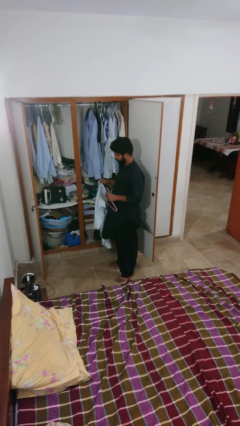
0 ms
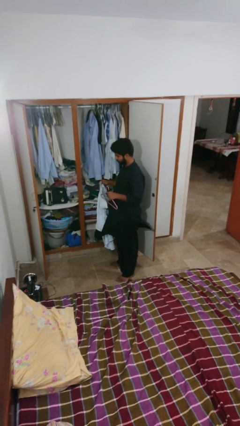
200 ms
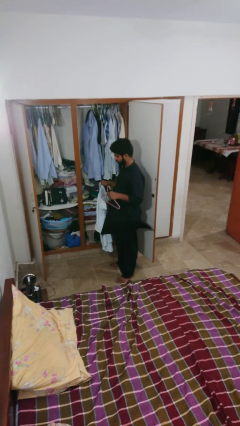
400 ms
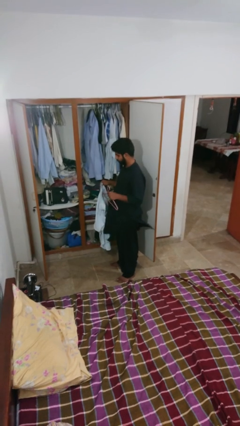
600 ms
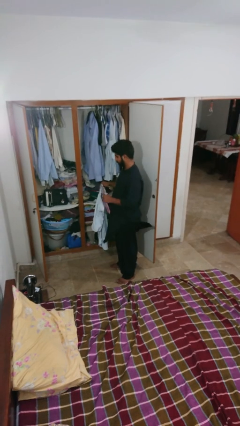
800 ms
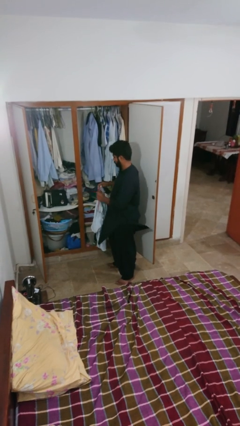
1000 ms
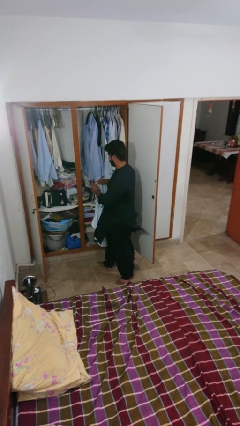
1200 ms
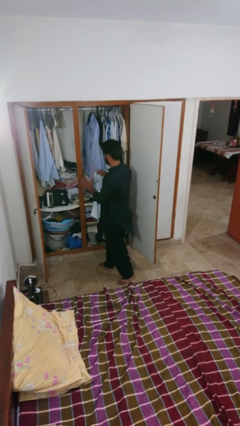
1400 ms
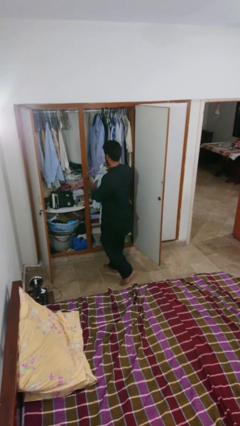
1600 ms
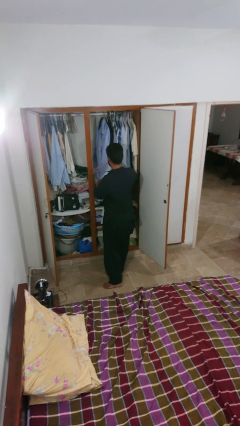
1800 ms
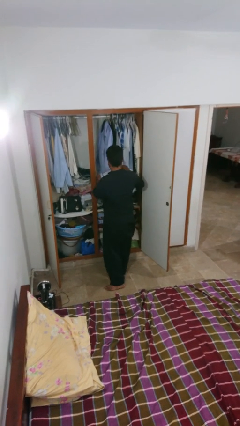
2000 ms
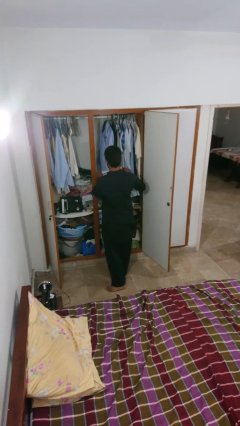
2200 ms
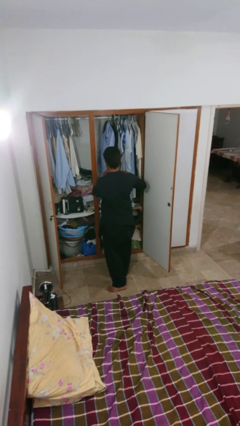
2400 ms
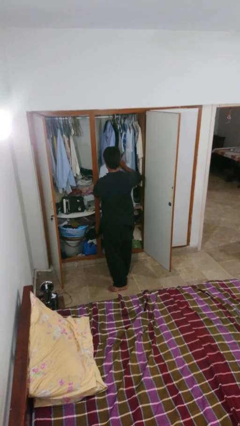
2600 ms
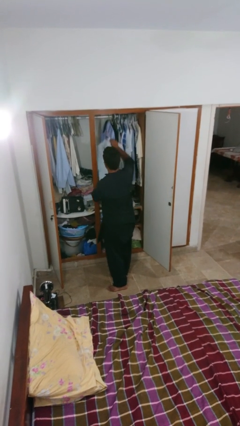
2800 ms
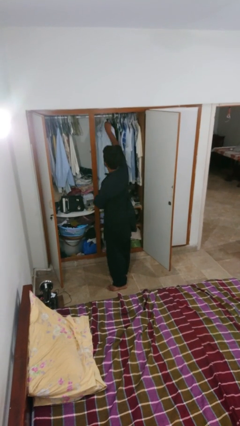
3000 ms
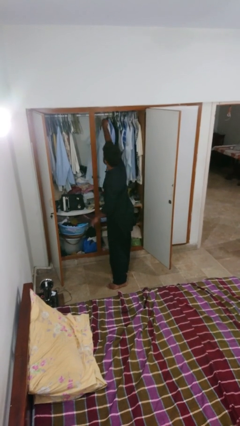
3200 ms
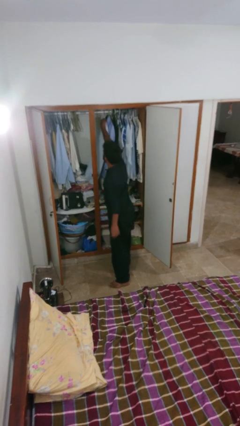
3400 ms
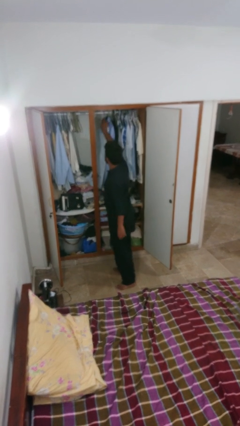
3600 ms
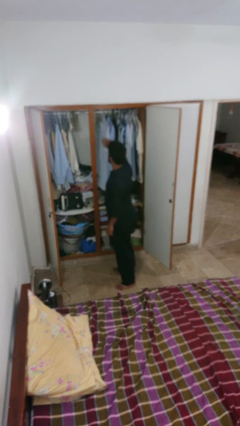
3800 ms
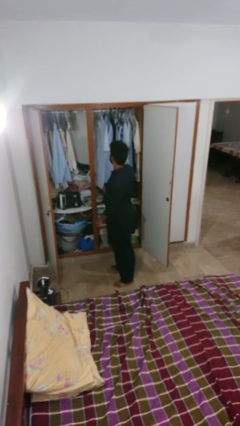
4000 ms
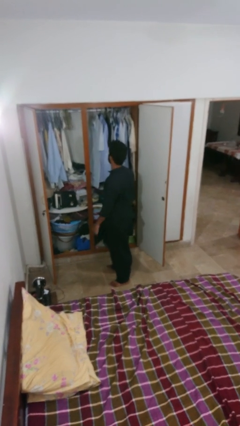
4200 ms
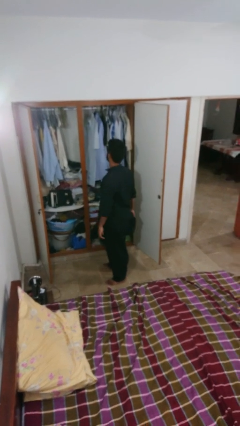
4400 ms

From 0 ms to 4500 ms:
person puts clothes into closet

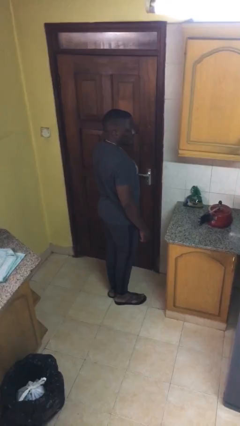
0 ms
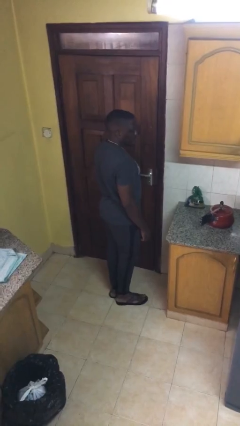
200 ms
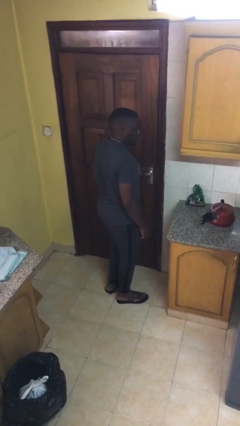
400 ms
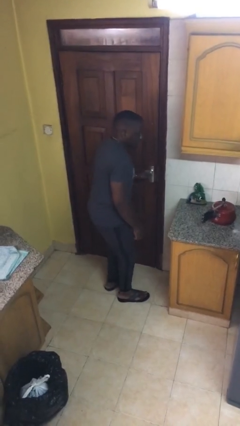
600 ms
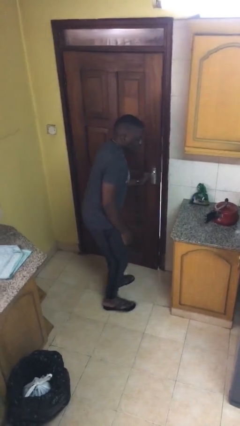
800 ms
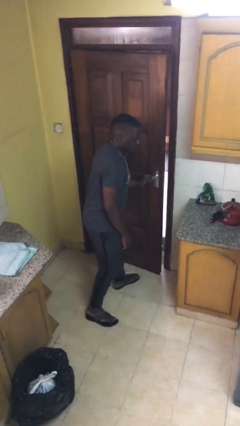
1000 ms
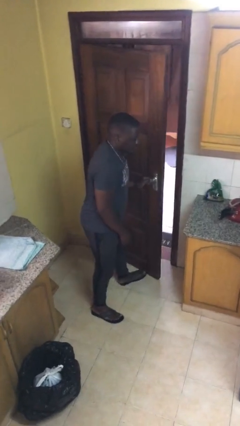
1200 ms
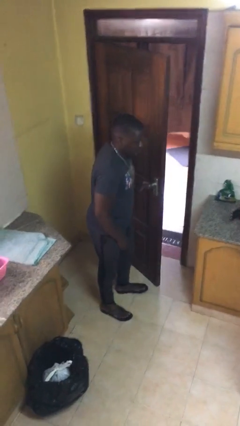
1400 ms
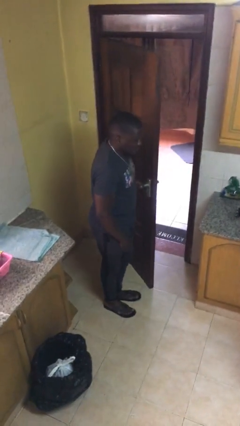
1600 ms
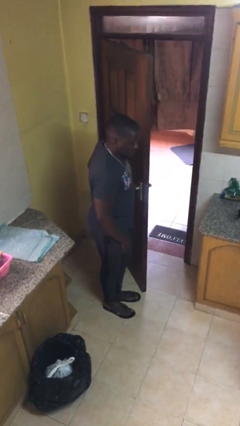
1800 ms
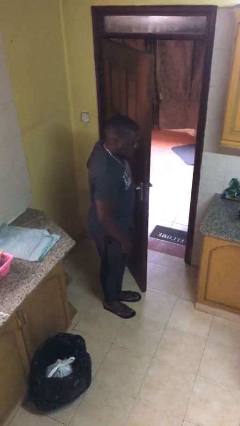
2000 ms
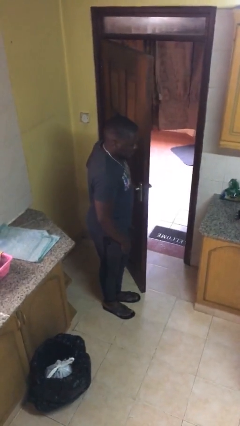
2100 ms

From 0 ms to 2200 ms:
person opens facility door

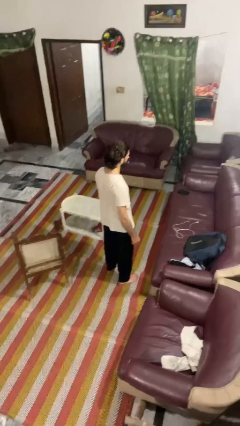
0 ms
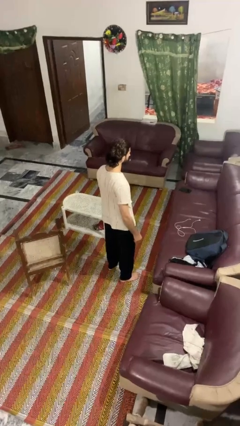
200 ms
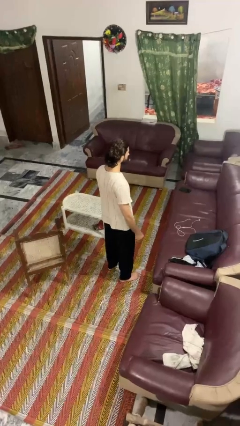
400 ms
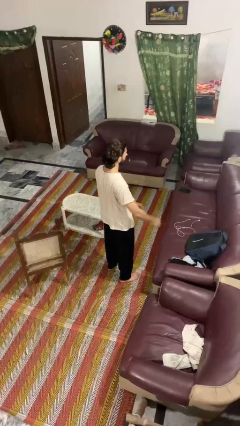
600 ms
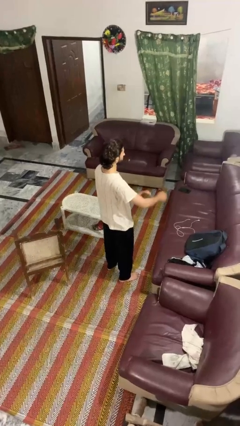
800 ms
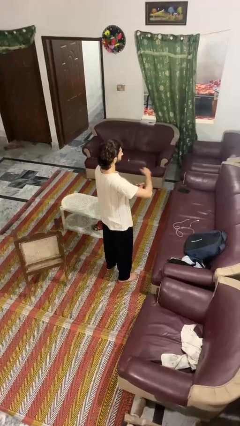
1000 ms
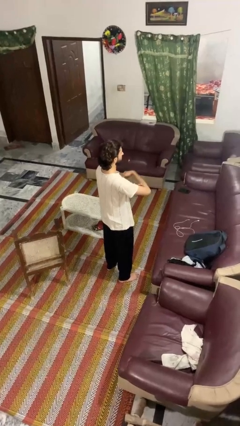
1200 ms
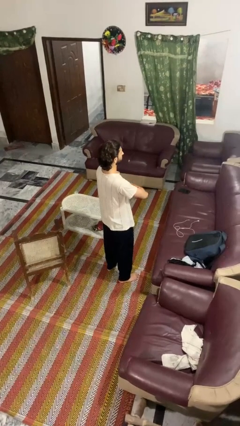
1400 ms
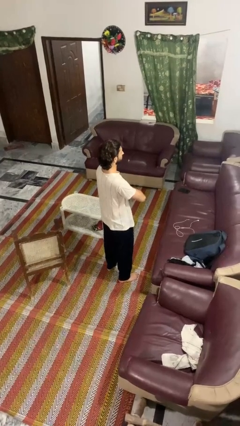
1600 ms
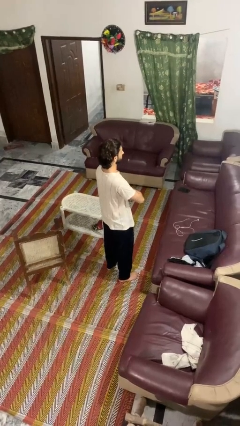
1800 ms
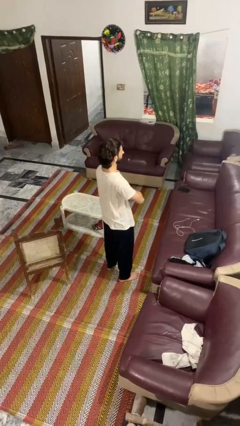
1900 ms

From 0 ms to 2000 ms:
person crosses arms

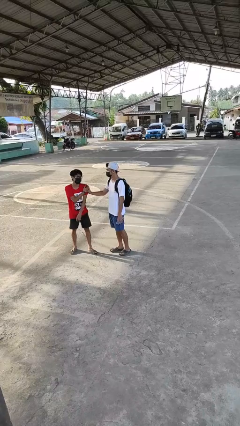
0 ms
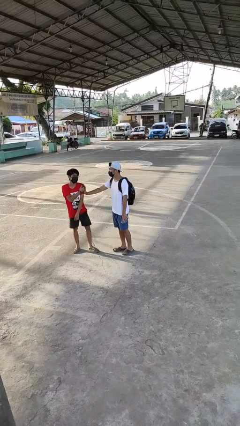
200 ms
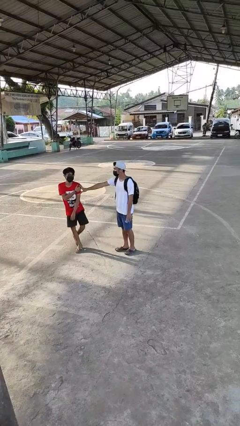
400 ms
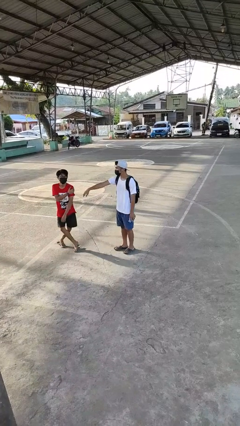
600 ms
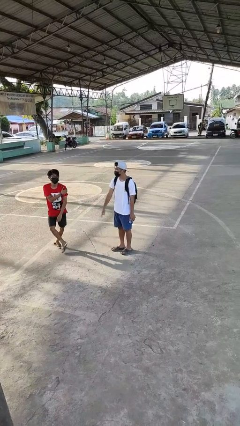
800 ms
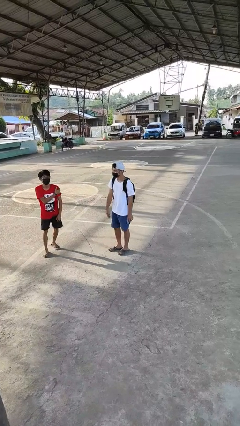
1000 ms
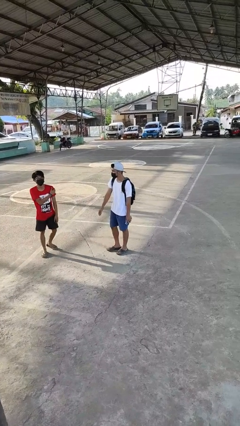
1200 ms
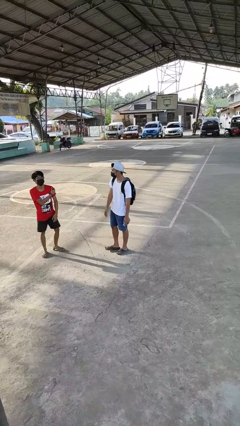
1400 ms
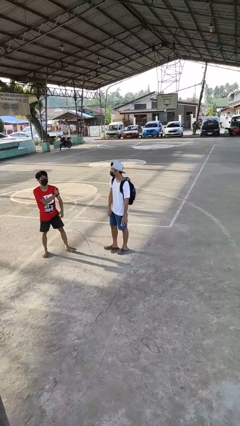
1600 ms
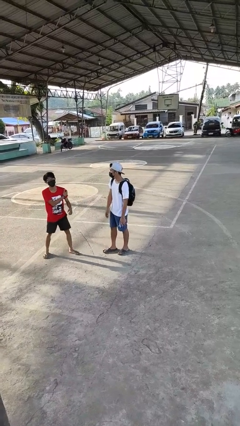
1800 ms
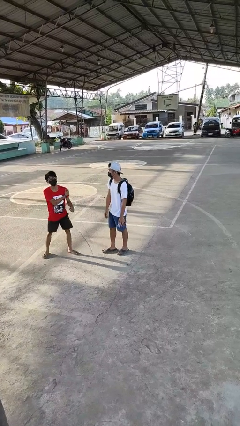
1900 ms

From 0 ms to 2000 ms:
person shoves person

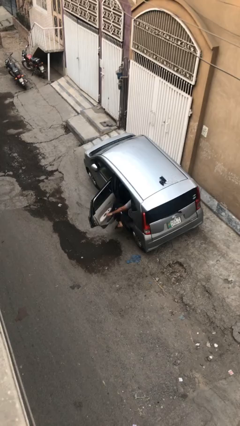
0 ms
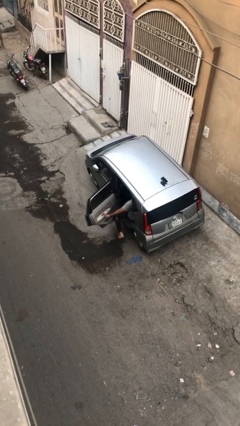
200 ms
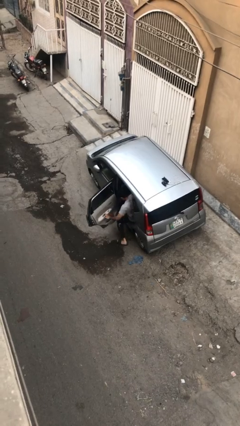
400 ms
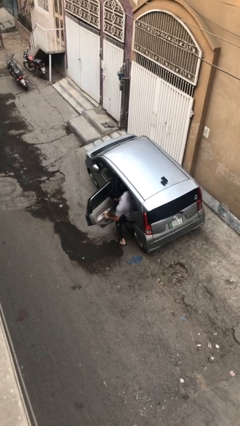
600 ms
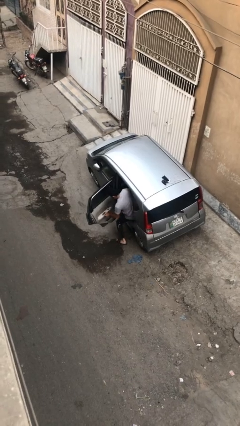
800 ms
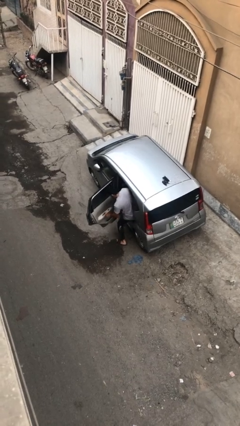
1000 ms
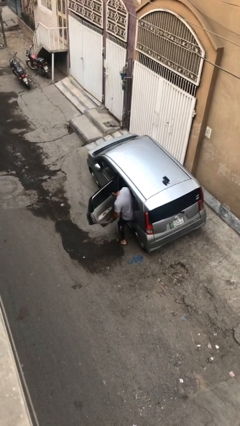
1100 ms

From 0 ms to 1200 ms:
person opens car door

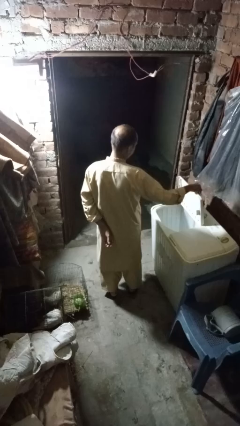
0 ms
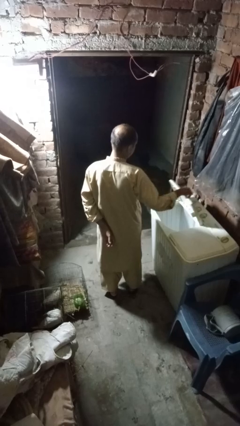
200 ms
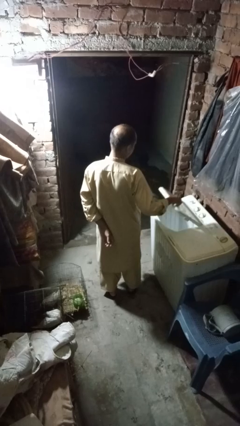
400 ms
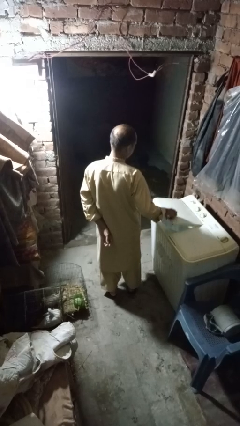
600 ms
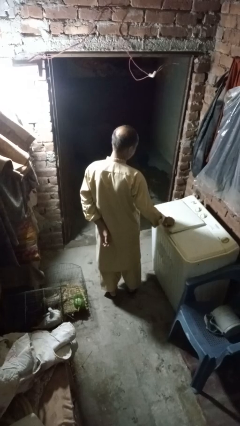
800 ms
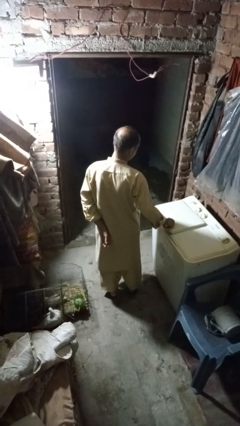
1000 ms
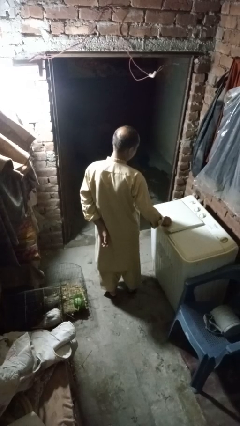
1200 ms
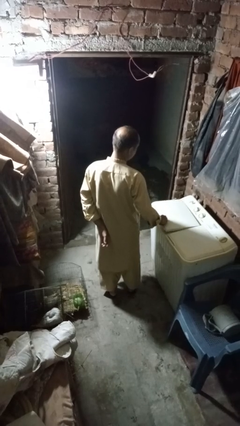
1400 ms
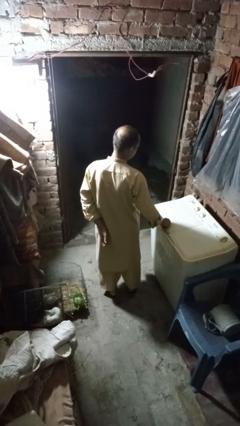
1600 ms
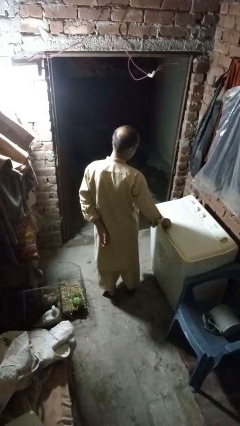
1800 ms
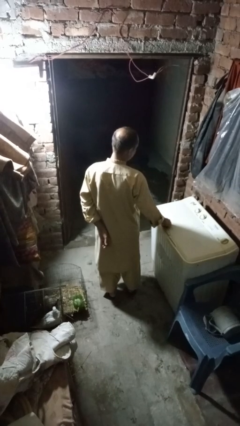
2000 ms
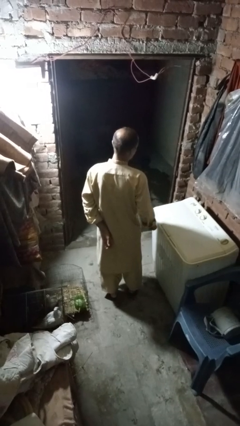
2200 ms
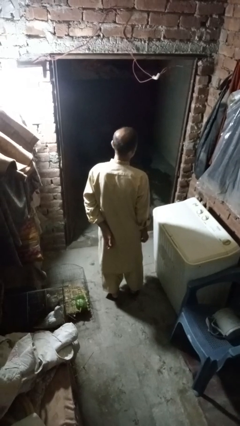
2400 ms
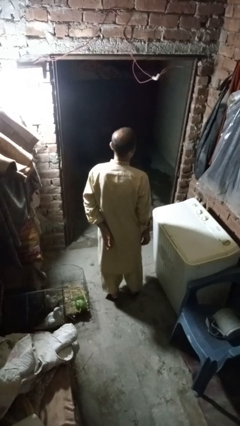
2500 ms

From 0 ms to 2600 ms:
person closes clothes washer

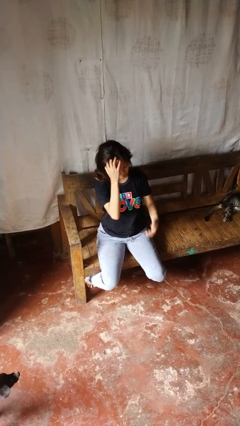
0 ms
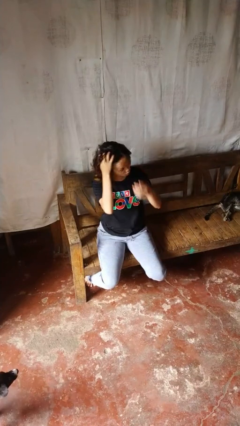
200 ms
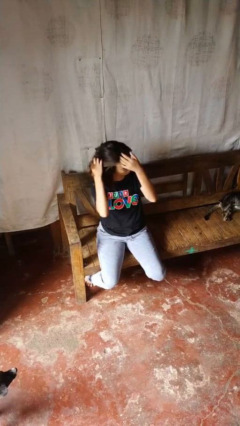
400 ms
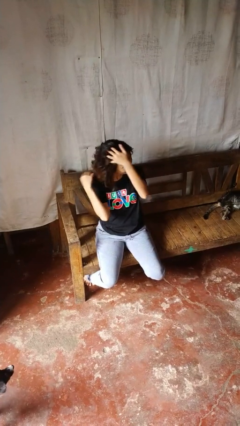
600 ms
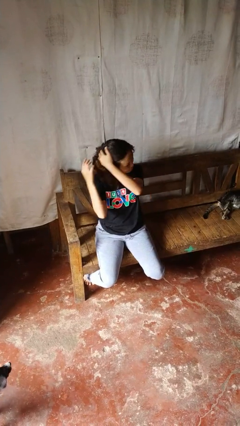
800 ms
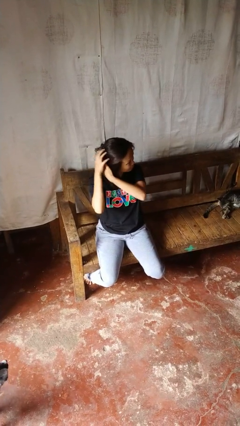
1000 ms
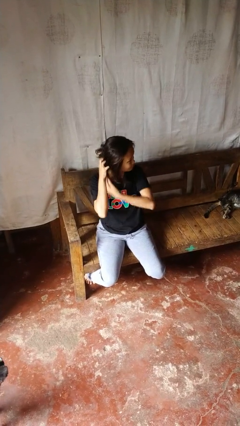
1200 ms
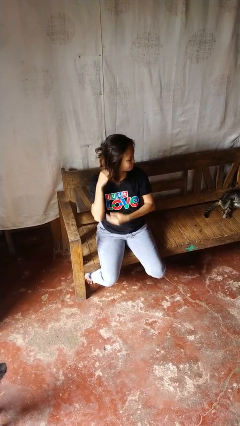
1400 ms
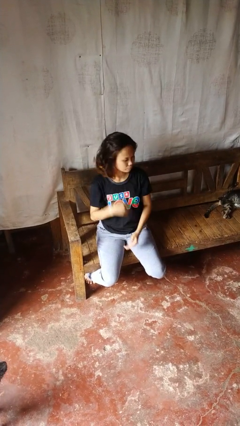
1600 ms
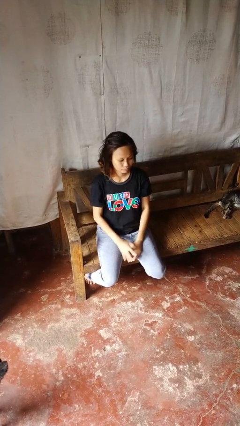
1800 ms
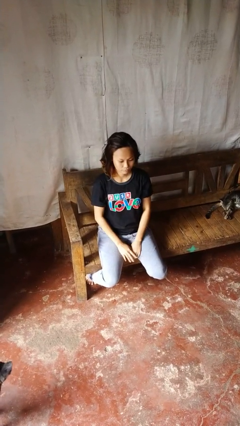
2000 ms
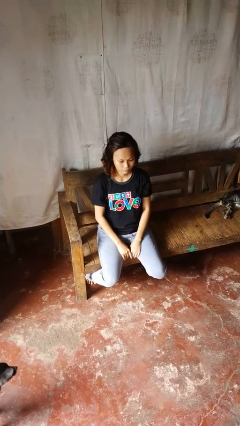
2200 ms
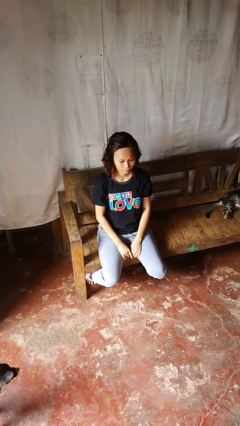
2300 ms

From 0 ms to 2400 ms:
person strokes hair
